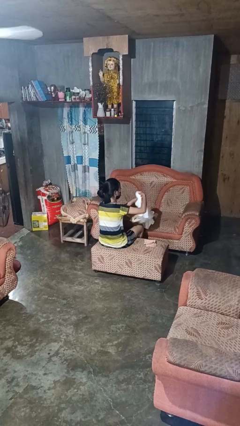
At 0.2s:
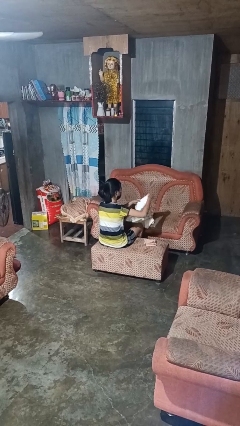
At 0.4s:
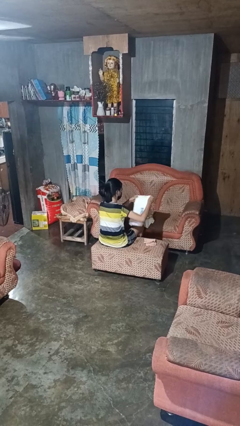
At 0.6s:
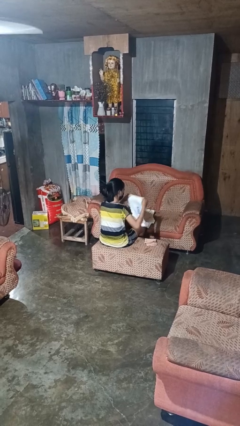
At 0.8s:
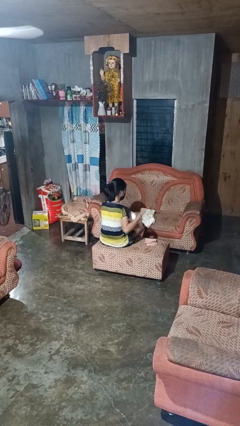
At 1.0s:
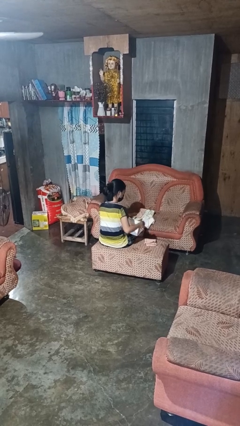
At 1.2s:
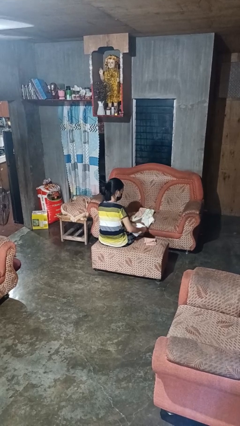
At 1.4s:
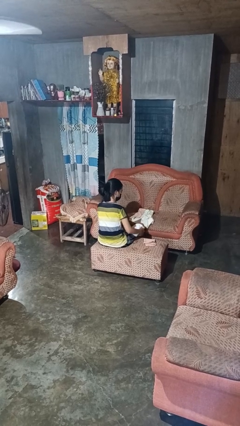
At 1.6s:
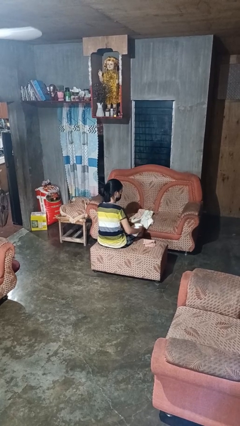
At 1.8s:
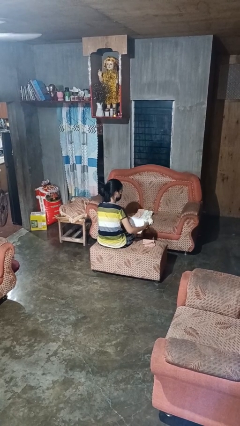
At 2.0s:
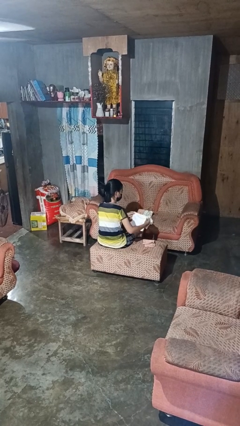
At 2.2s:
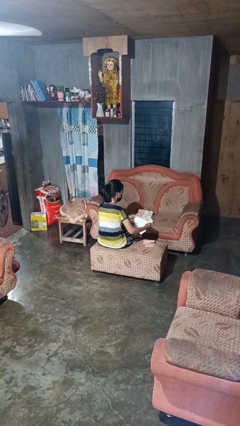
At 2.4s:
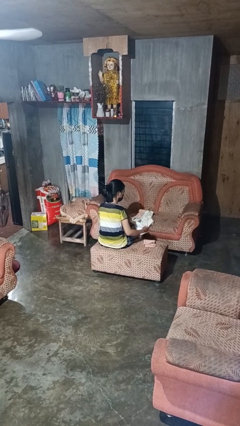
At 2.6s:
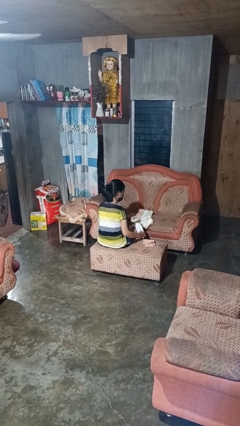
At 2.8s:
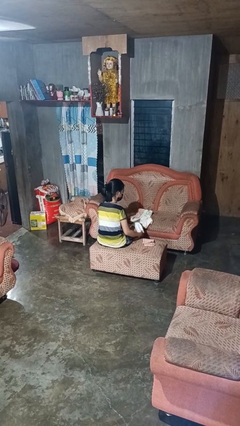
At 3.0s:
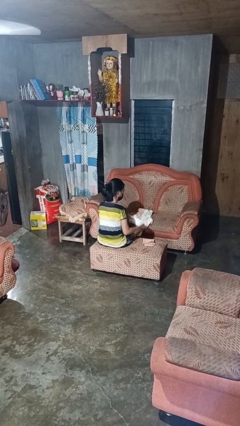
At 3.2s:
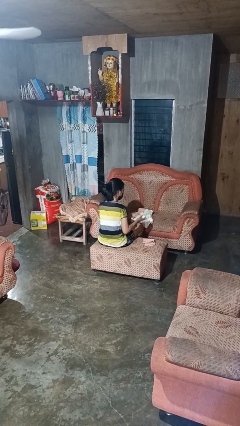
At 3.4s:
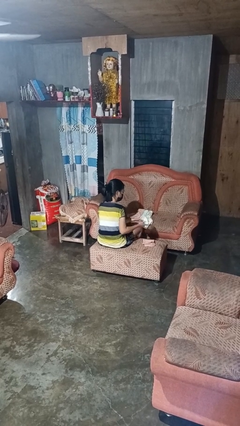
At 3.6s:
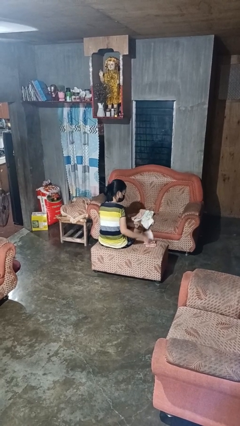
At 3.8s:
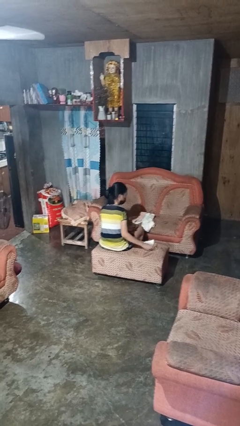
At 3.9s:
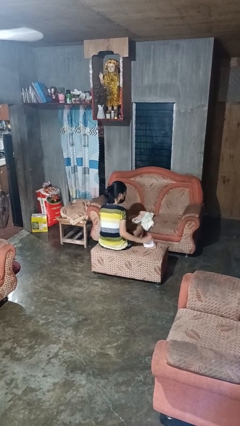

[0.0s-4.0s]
person folds towel

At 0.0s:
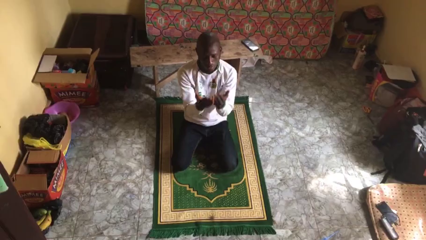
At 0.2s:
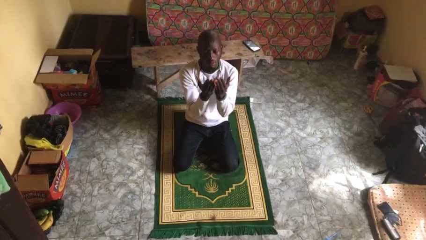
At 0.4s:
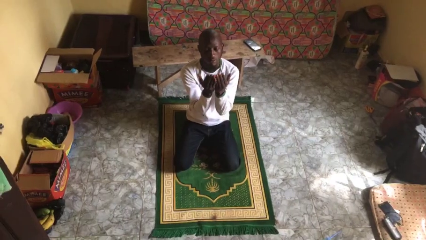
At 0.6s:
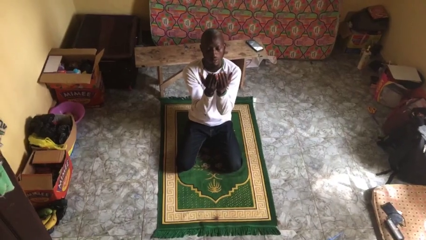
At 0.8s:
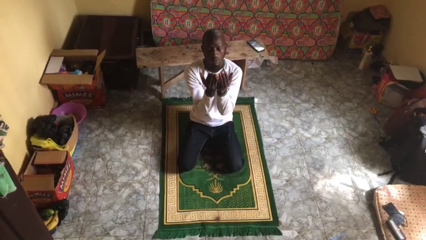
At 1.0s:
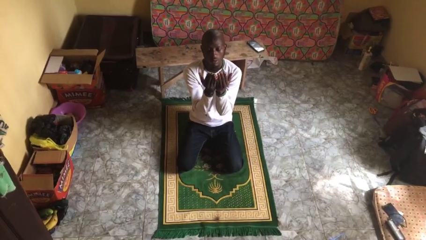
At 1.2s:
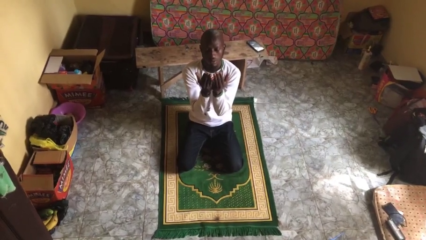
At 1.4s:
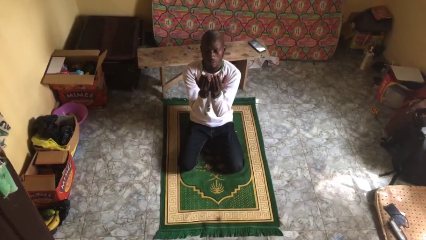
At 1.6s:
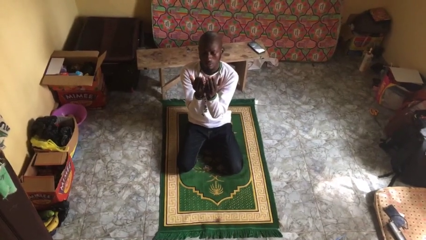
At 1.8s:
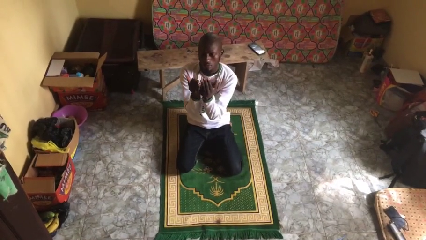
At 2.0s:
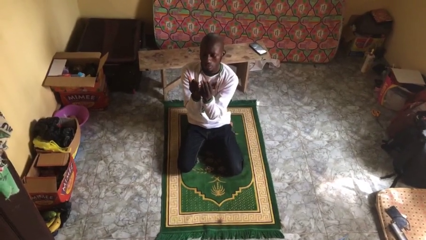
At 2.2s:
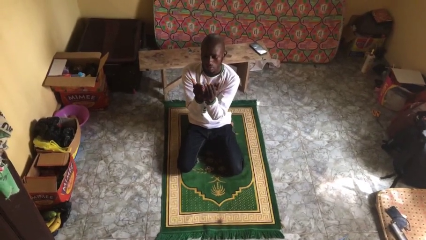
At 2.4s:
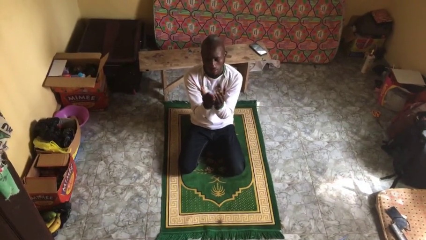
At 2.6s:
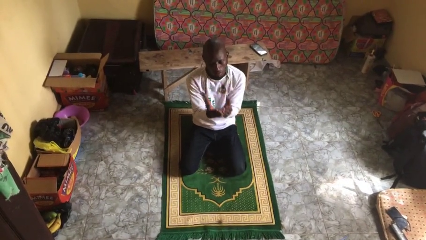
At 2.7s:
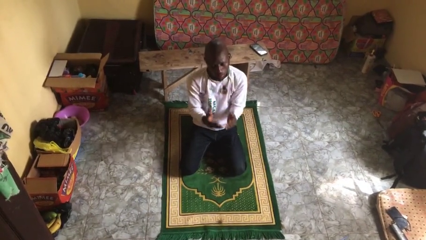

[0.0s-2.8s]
person prays

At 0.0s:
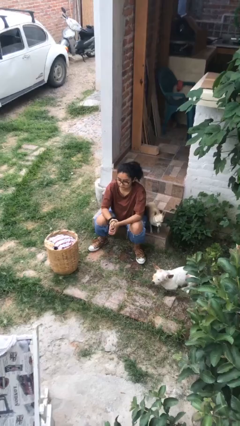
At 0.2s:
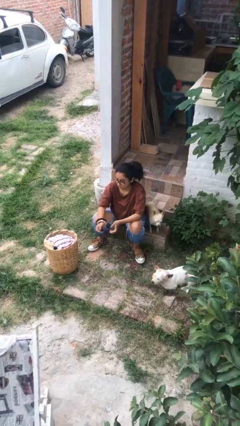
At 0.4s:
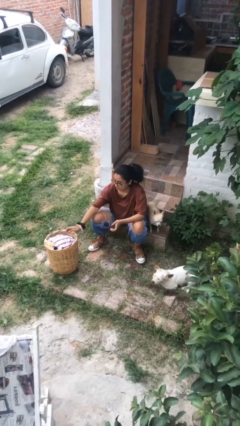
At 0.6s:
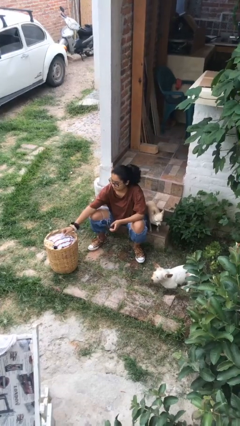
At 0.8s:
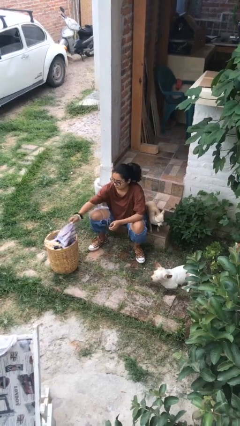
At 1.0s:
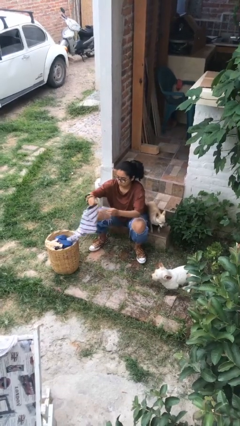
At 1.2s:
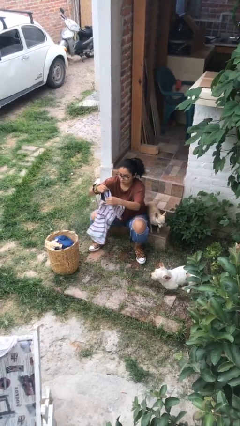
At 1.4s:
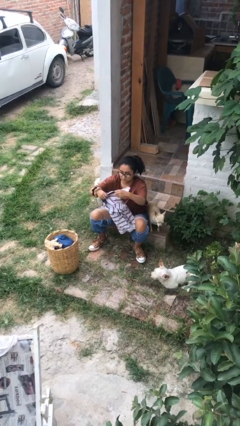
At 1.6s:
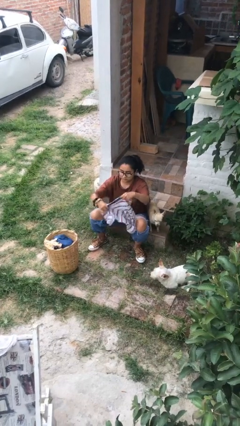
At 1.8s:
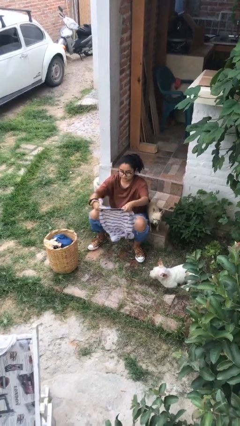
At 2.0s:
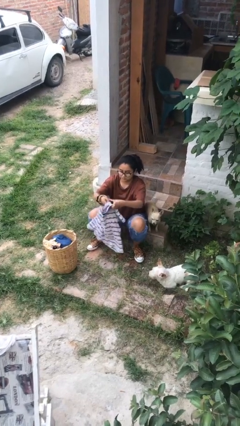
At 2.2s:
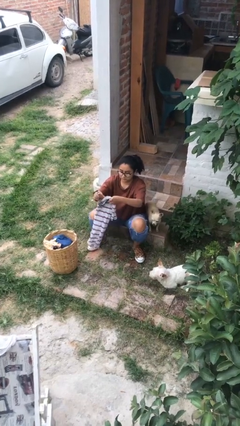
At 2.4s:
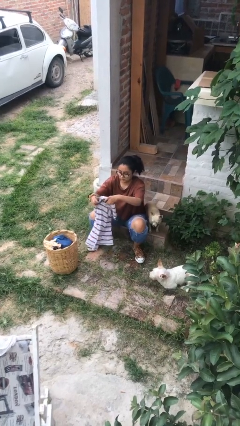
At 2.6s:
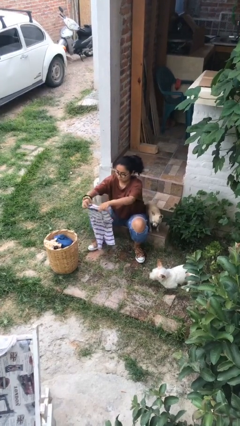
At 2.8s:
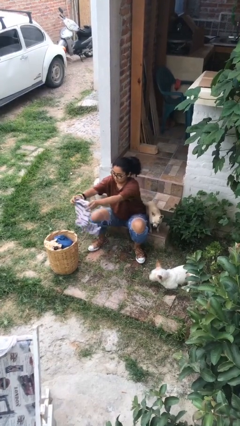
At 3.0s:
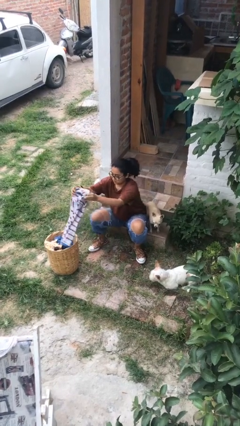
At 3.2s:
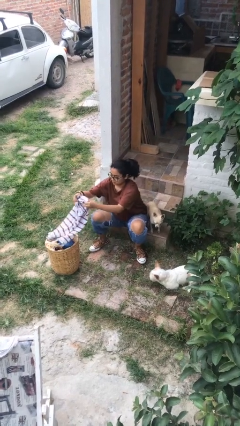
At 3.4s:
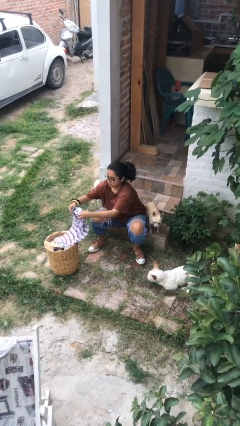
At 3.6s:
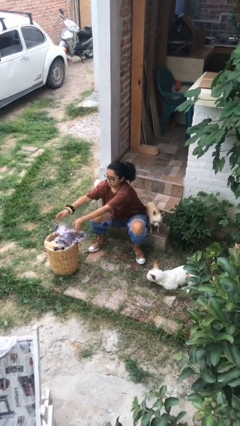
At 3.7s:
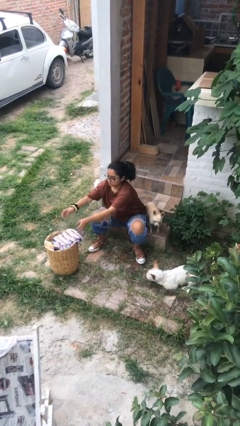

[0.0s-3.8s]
person folds shirt

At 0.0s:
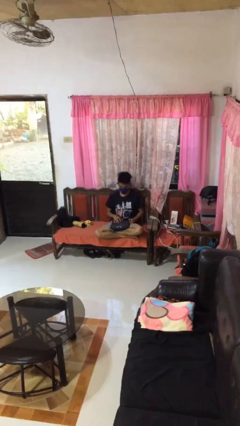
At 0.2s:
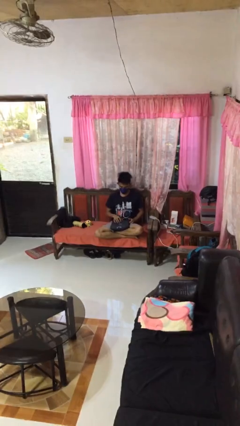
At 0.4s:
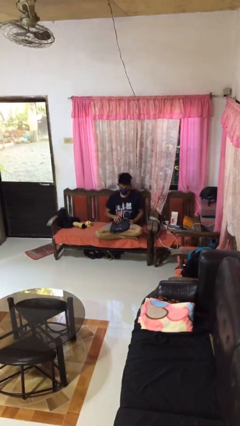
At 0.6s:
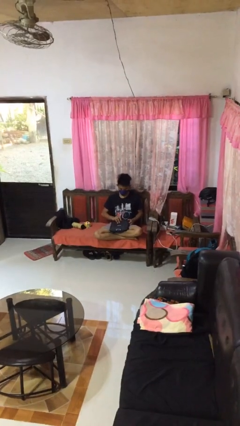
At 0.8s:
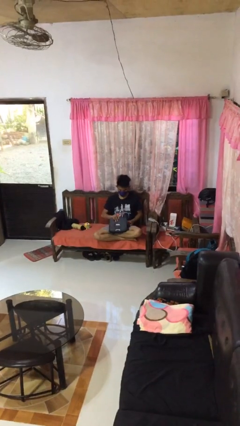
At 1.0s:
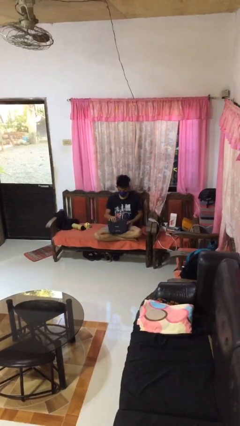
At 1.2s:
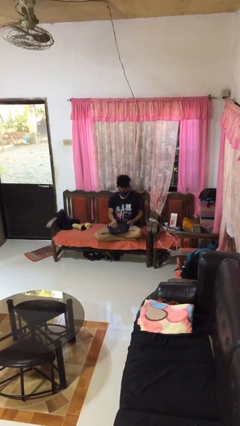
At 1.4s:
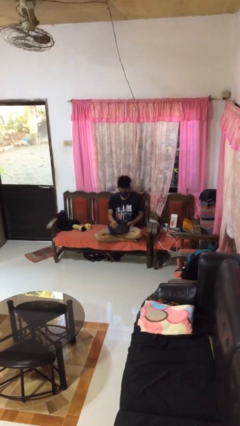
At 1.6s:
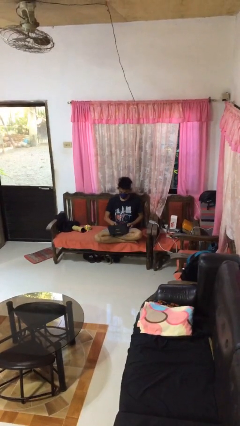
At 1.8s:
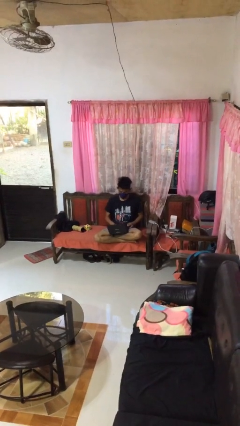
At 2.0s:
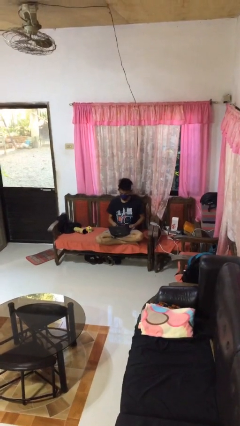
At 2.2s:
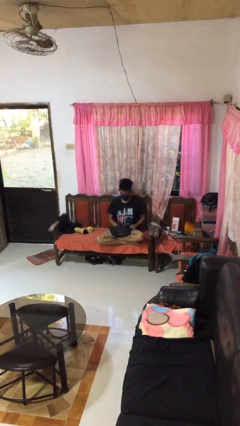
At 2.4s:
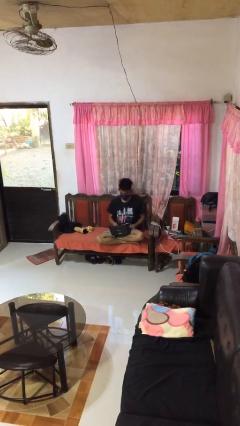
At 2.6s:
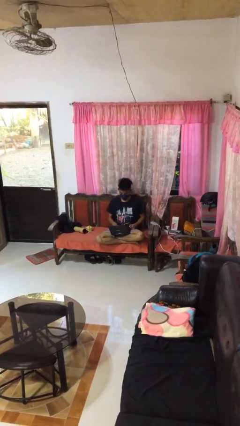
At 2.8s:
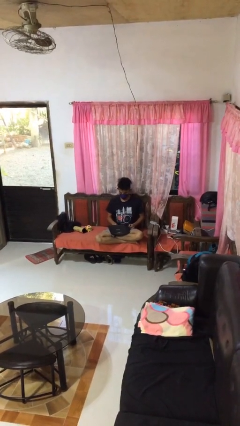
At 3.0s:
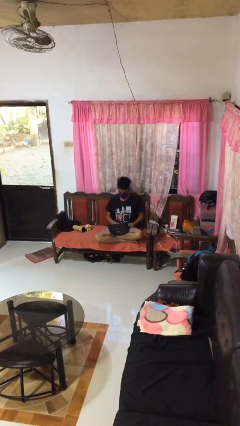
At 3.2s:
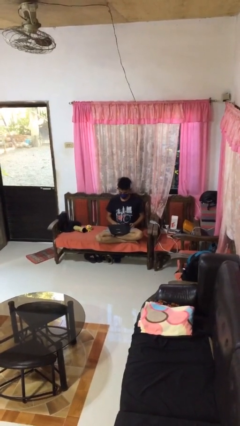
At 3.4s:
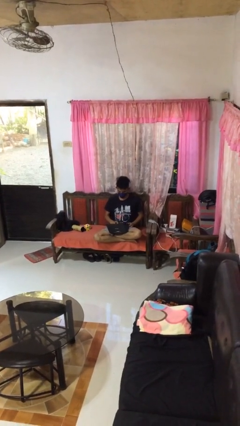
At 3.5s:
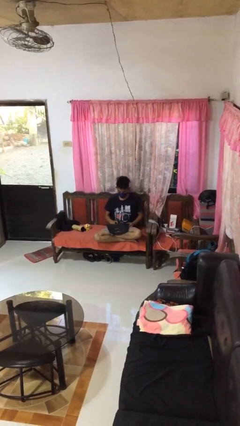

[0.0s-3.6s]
person opens laptop

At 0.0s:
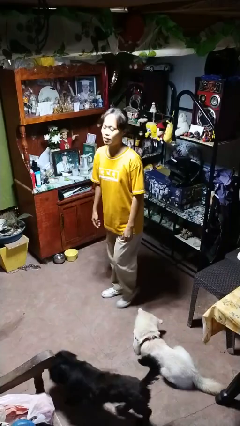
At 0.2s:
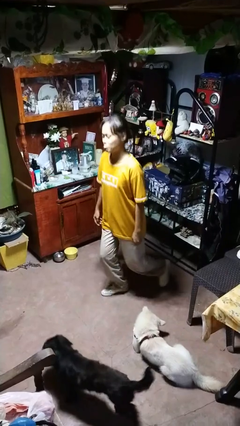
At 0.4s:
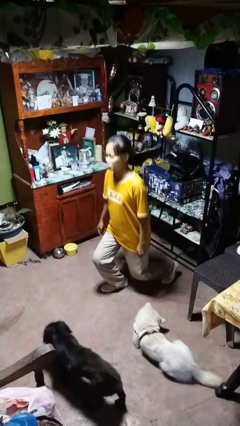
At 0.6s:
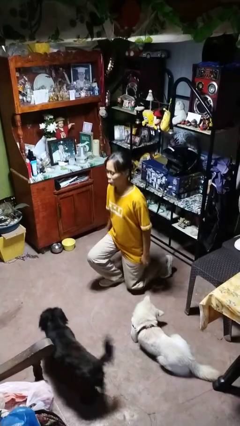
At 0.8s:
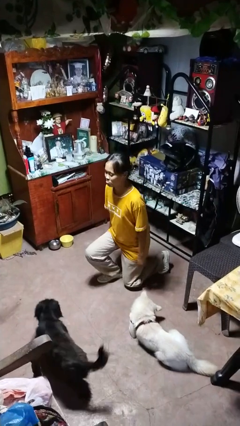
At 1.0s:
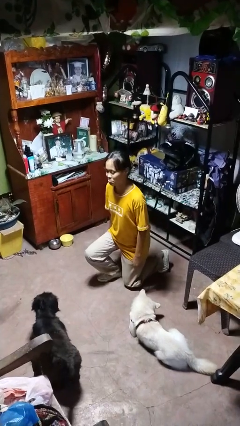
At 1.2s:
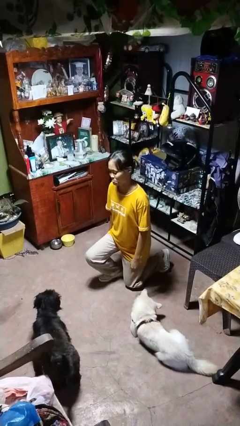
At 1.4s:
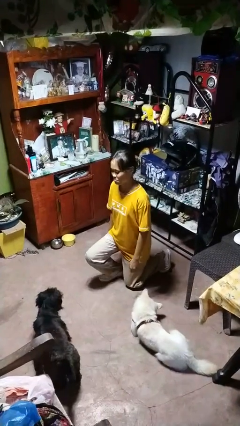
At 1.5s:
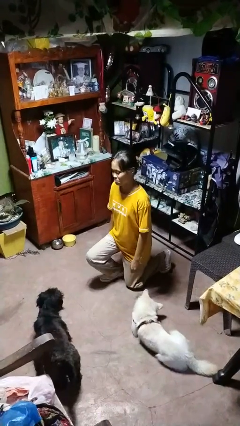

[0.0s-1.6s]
person kneels

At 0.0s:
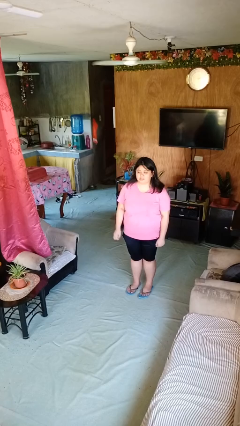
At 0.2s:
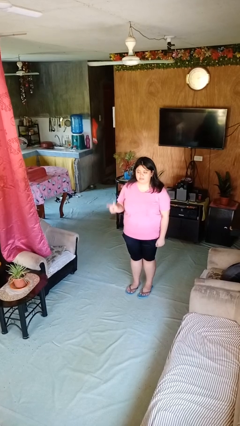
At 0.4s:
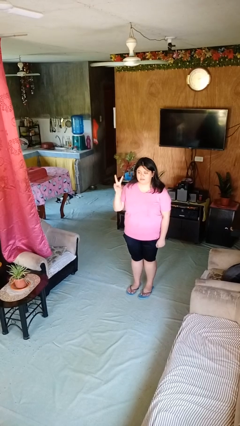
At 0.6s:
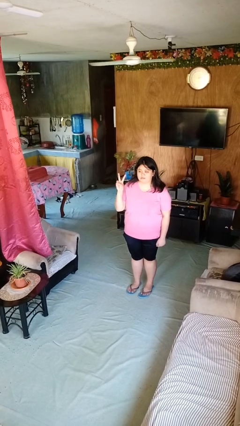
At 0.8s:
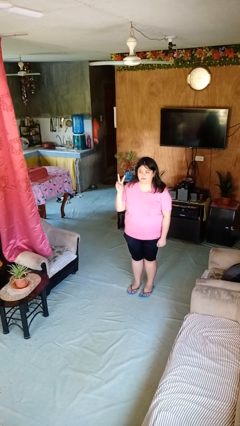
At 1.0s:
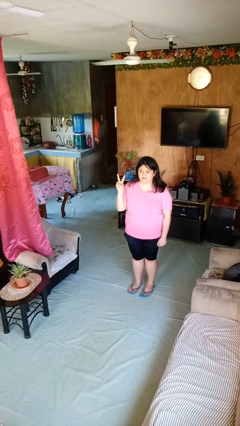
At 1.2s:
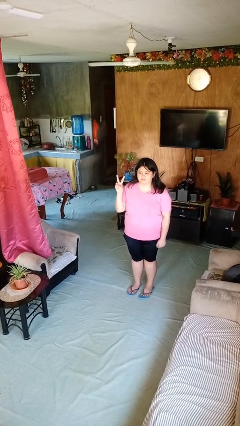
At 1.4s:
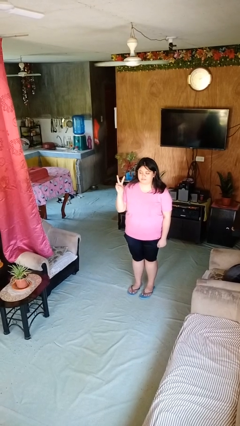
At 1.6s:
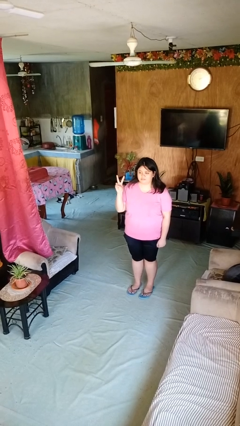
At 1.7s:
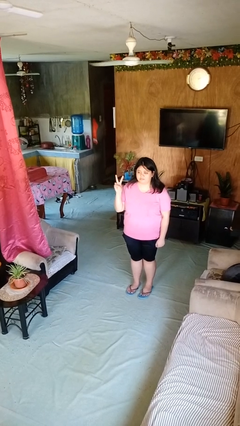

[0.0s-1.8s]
person gestures peace
